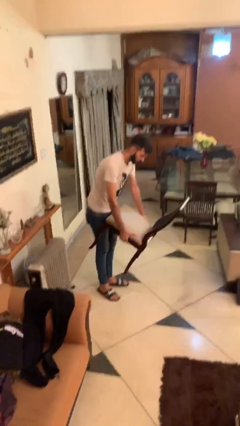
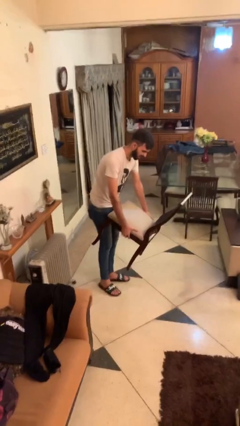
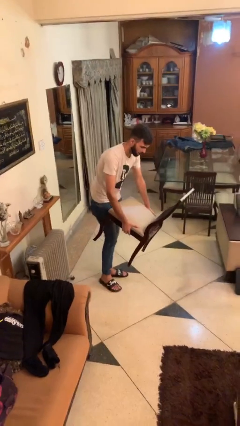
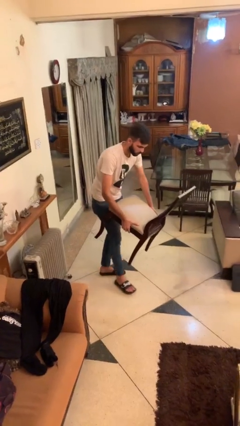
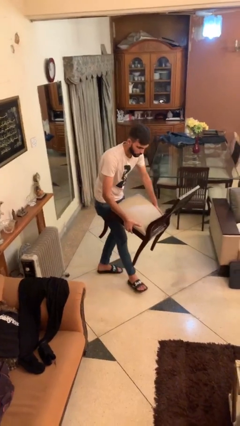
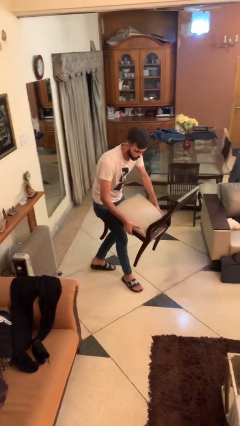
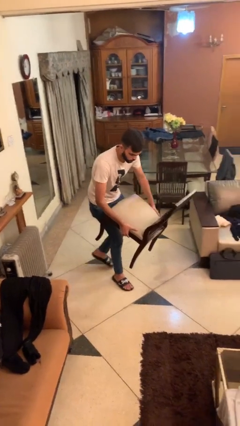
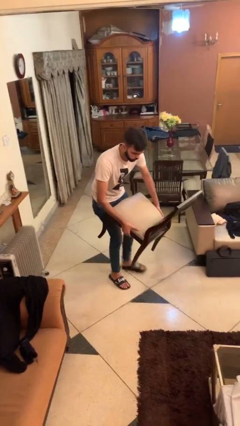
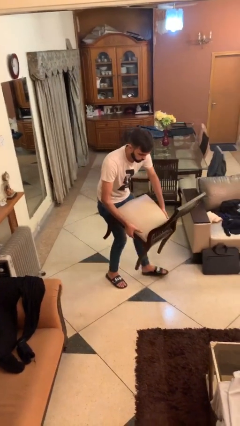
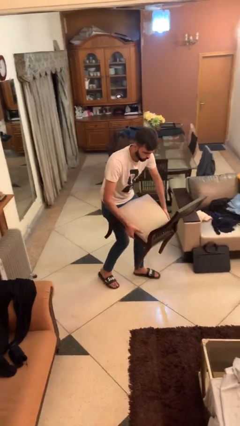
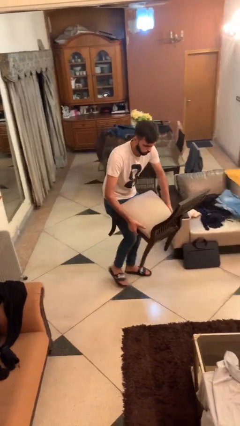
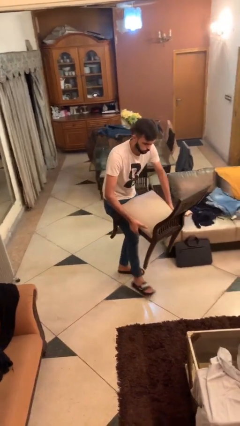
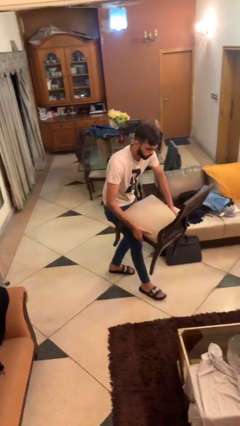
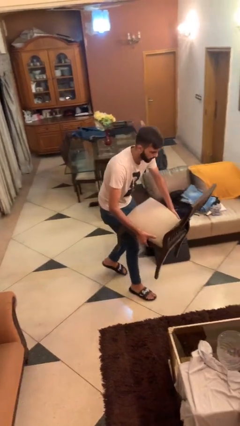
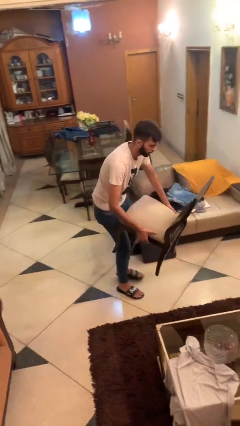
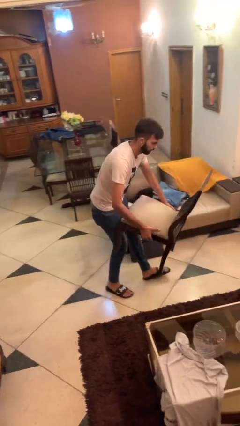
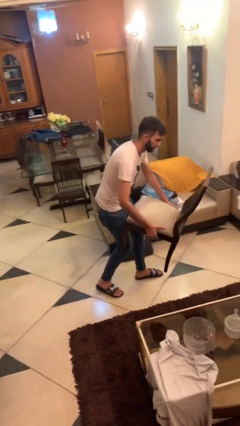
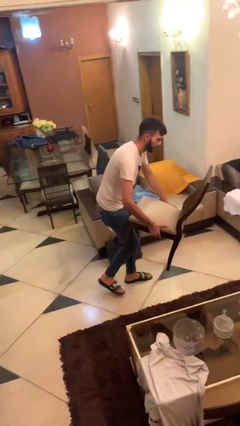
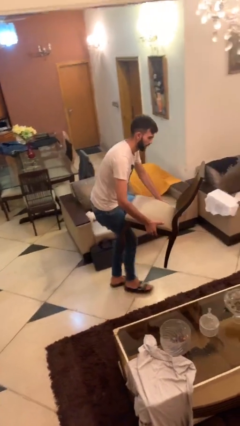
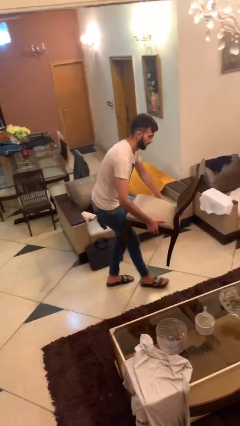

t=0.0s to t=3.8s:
person carries heavy object

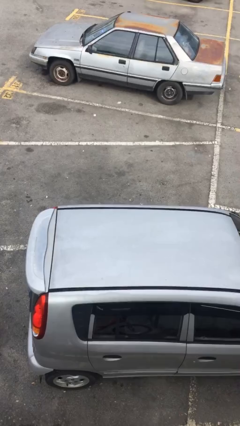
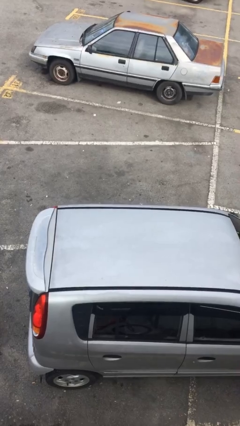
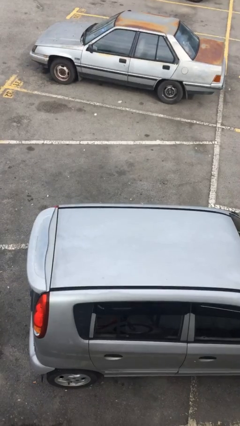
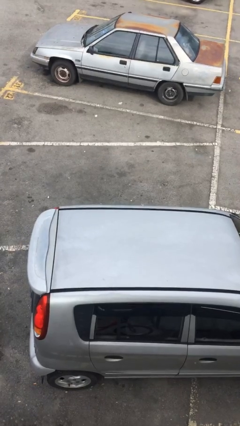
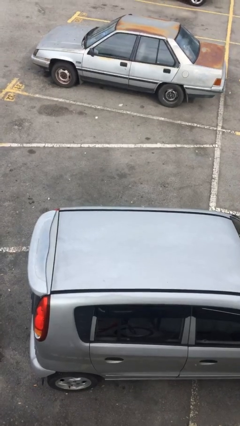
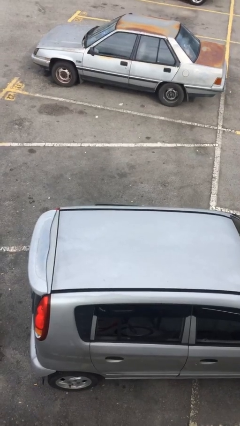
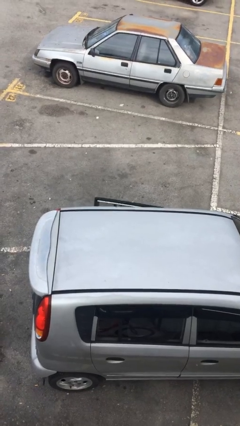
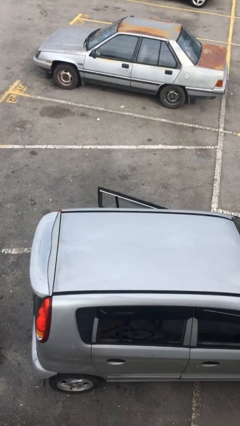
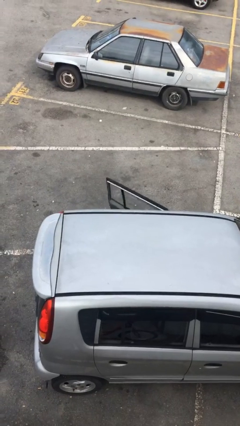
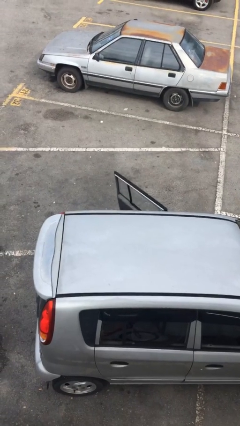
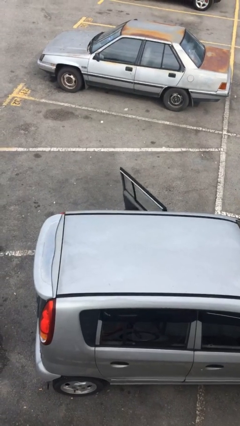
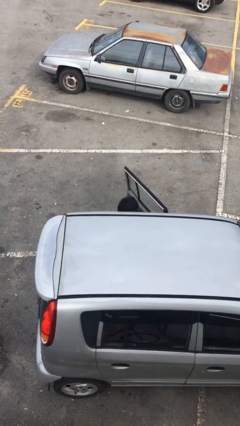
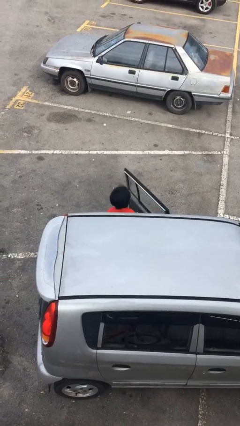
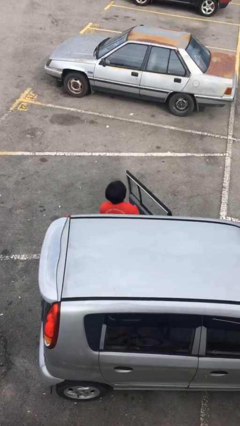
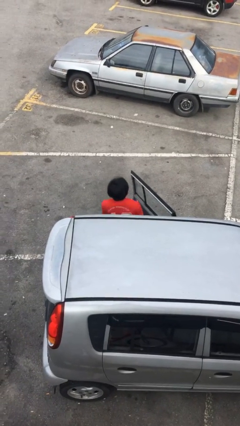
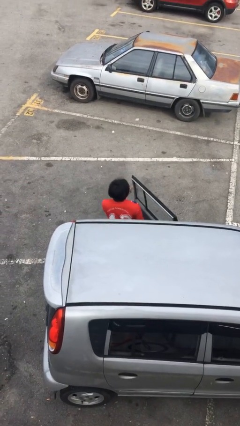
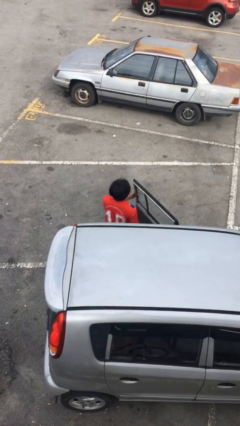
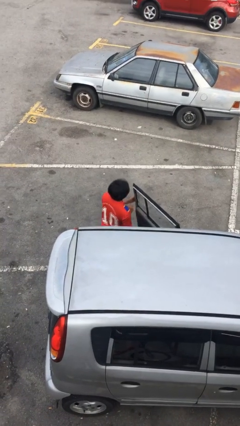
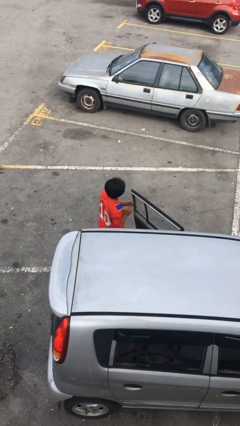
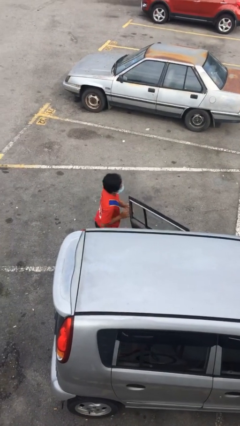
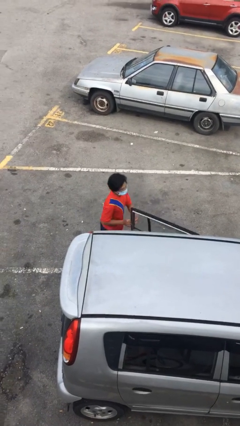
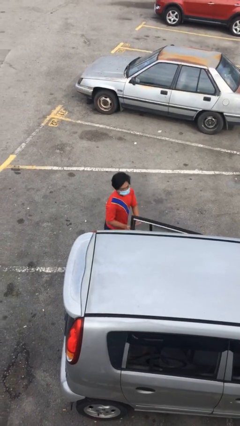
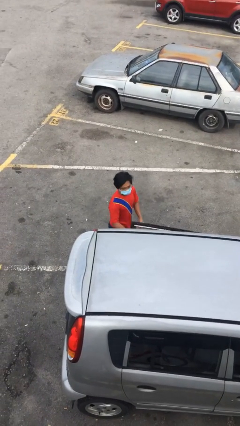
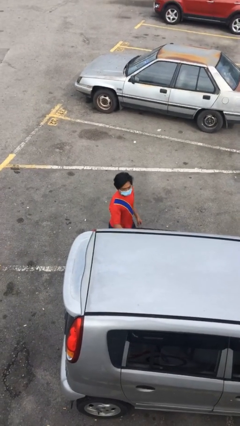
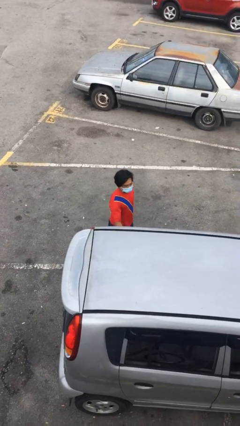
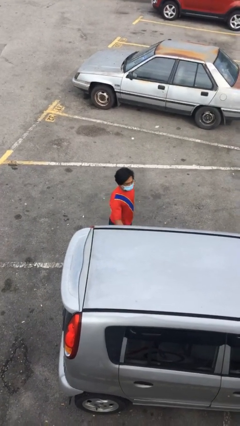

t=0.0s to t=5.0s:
person exits car

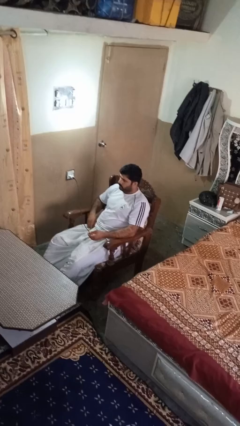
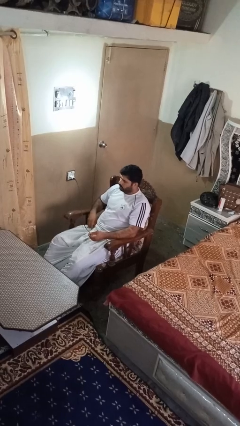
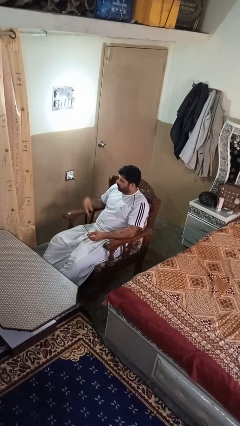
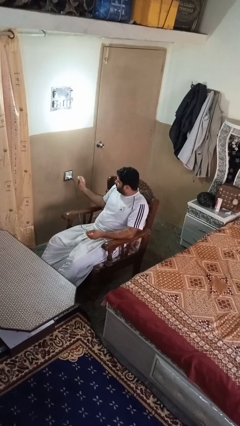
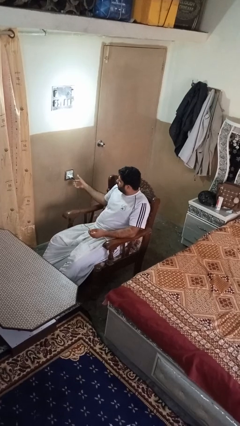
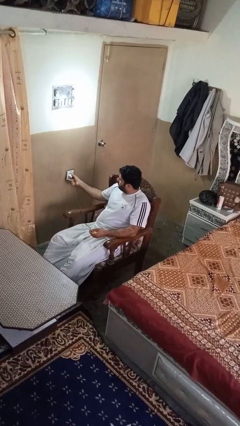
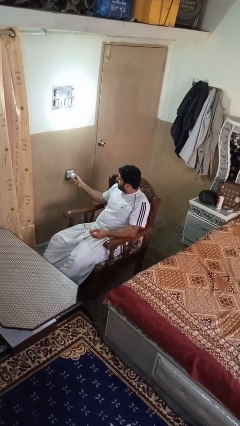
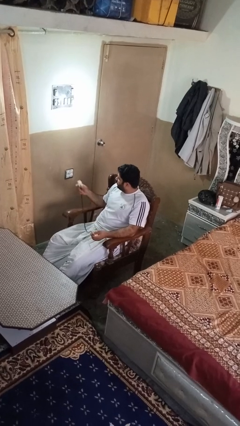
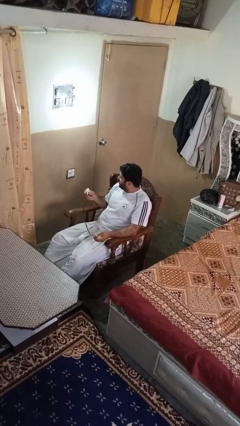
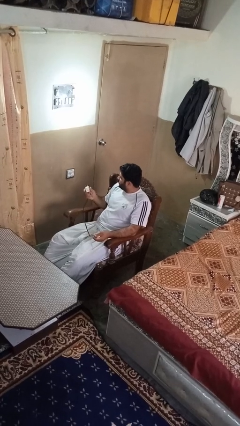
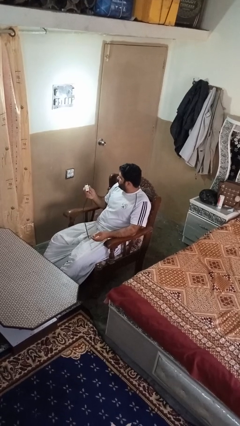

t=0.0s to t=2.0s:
person unplugs from electrical socket

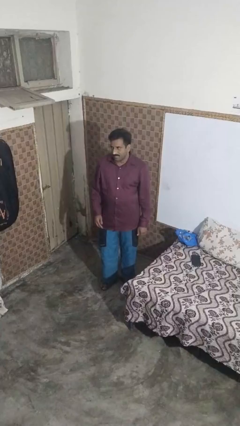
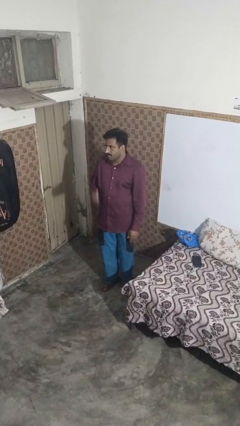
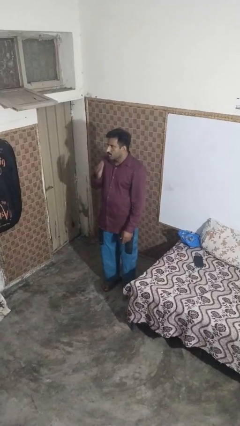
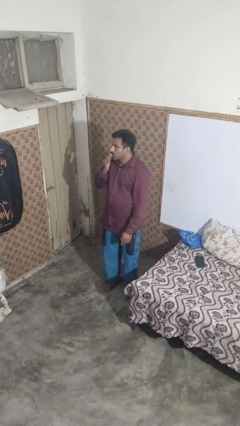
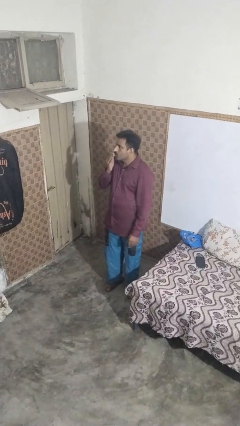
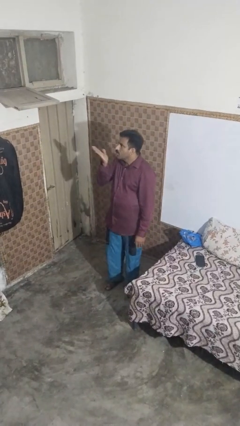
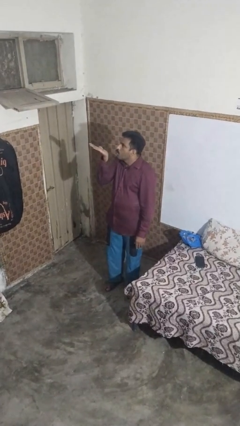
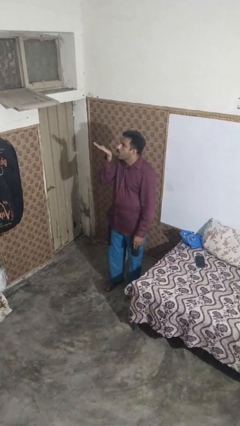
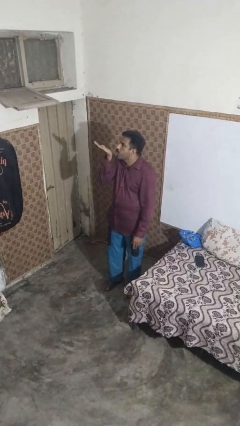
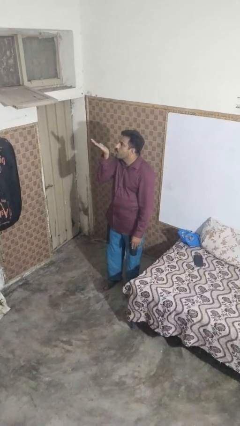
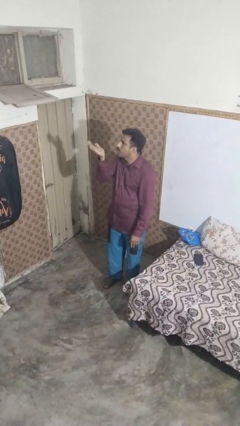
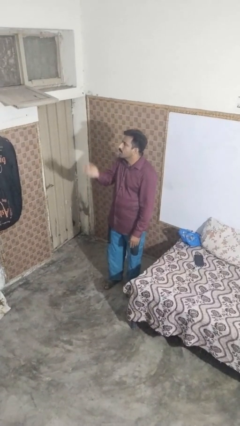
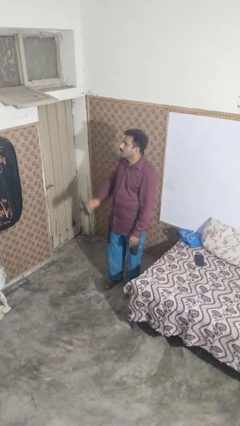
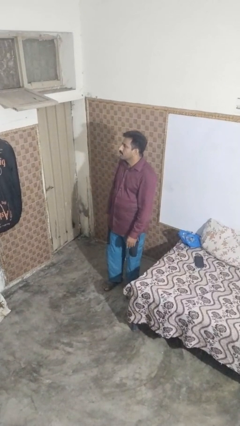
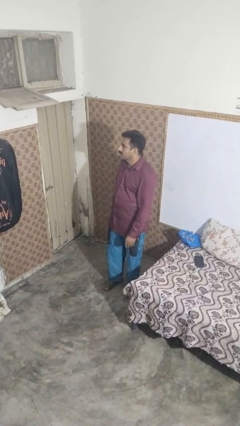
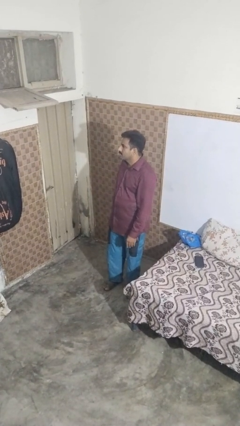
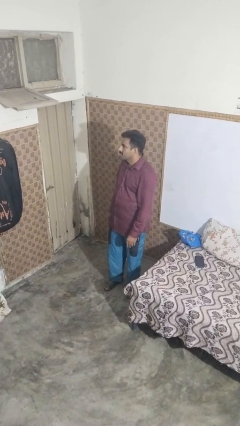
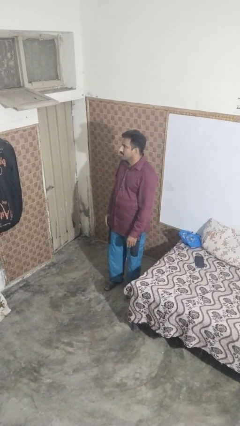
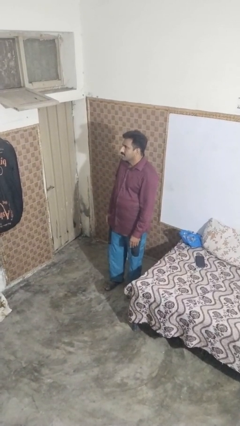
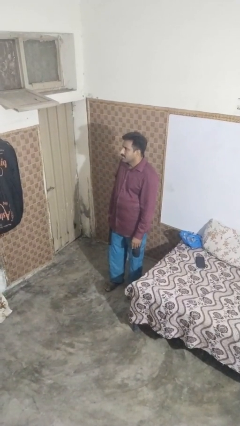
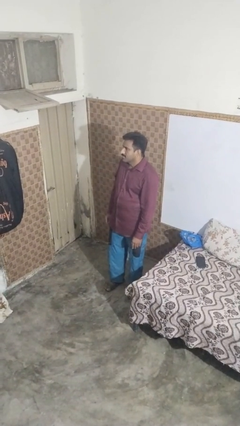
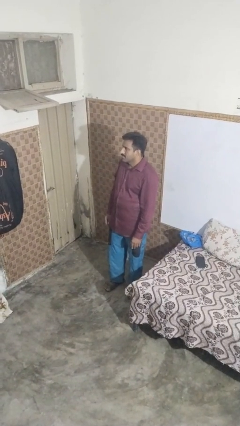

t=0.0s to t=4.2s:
person gestures blow kiss

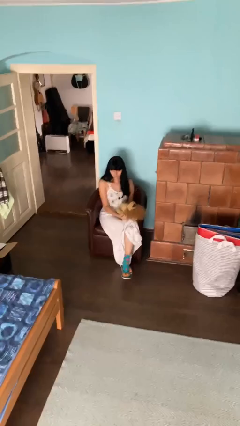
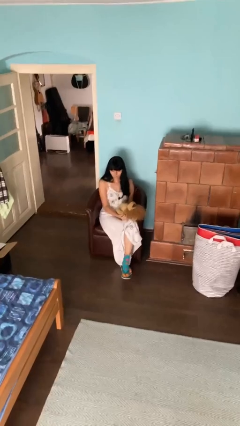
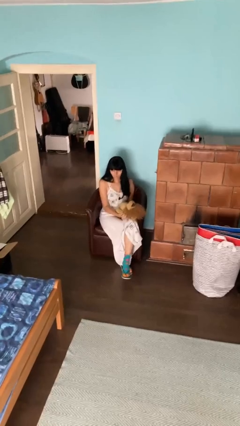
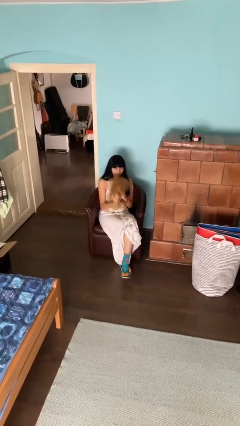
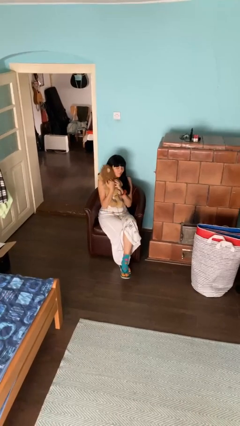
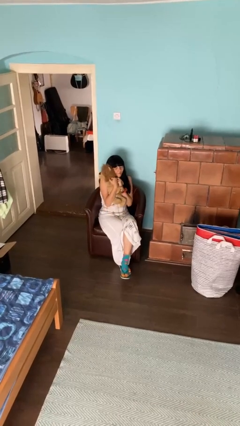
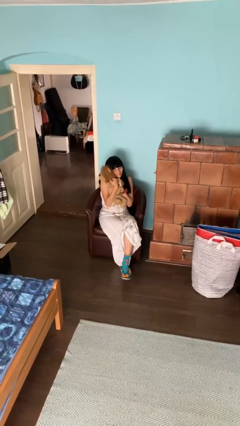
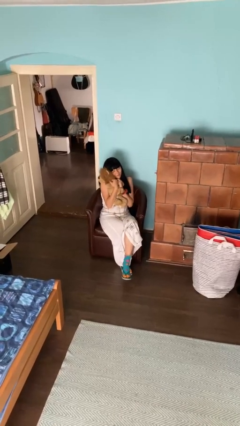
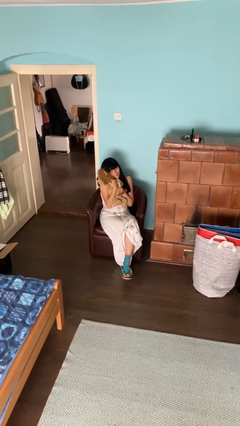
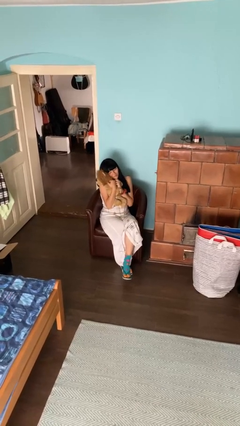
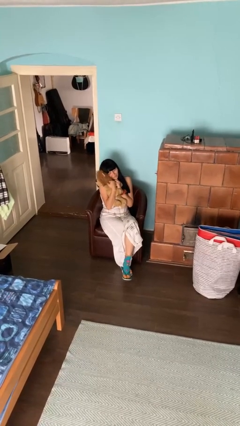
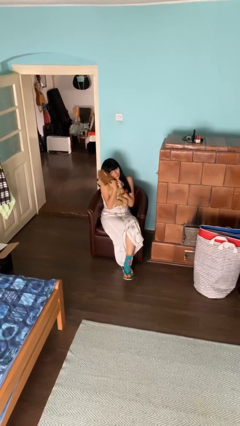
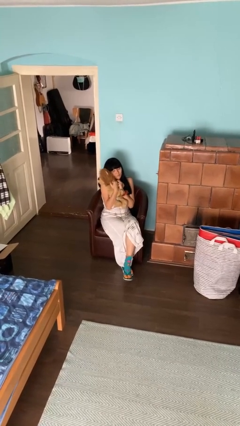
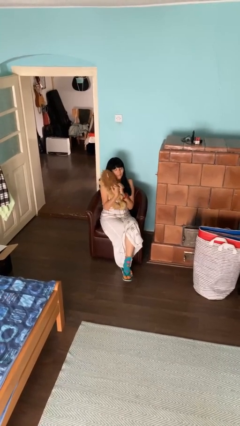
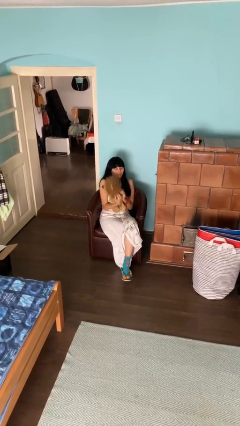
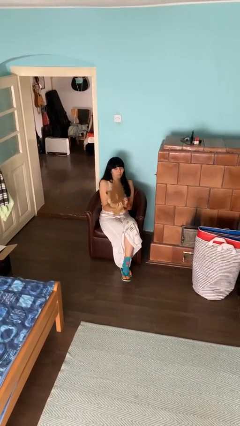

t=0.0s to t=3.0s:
person hugs stuffed animal
